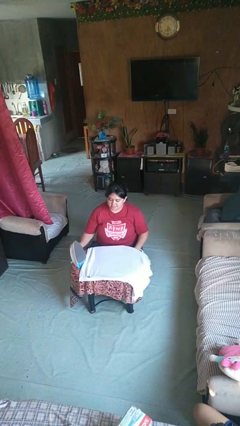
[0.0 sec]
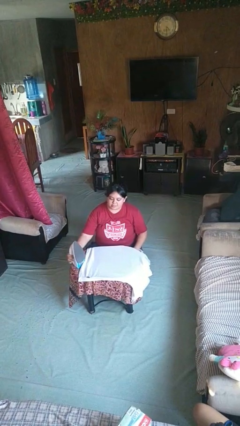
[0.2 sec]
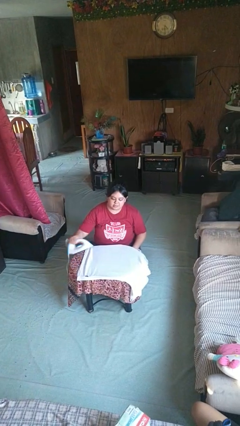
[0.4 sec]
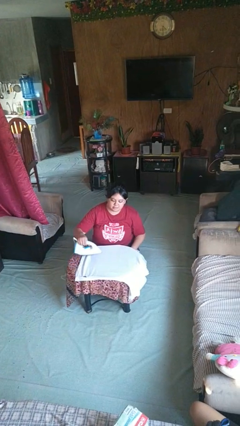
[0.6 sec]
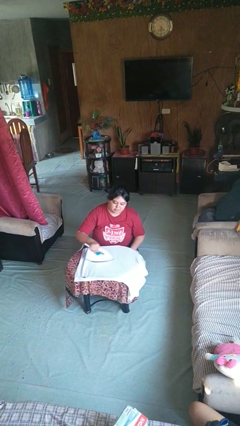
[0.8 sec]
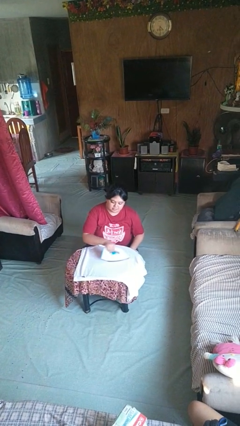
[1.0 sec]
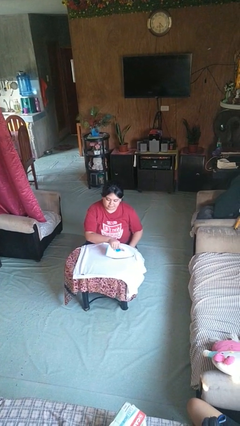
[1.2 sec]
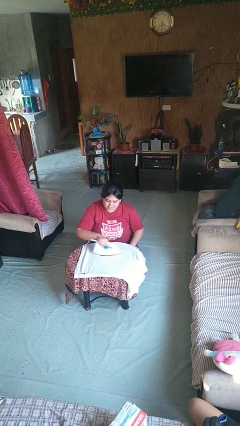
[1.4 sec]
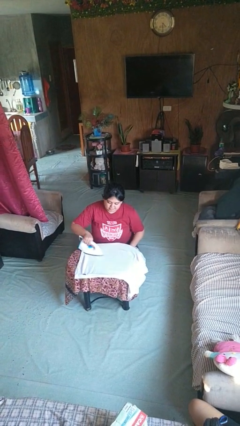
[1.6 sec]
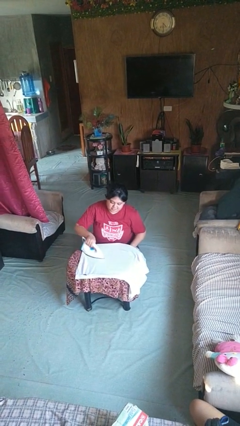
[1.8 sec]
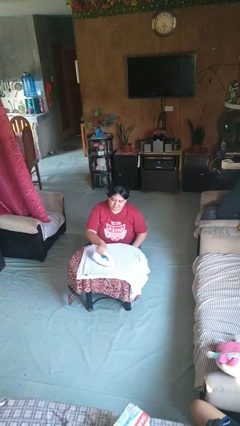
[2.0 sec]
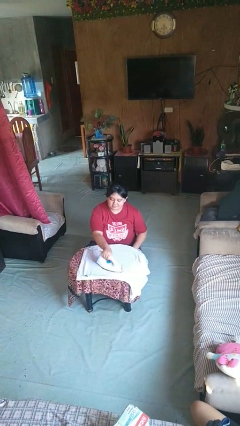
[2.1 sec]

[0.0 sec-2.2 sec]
person irons clothes

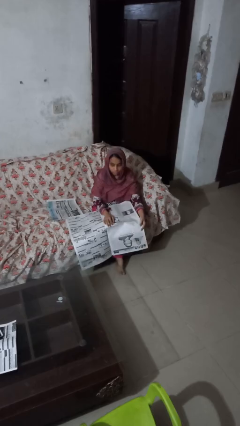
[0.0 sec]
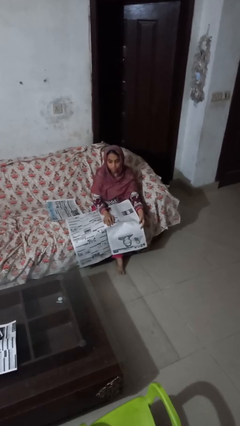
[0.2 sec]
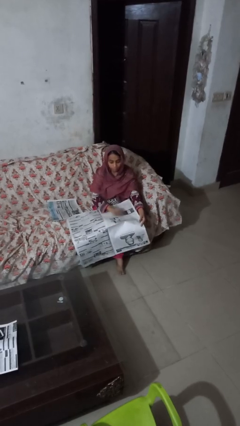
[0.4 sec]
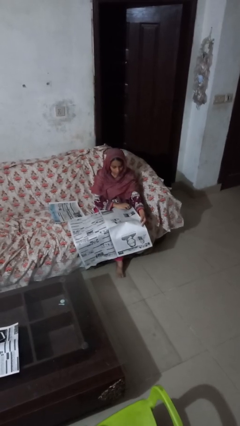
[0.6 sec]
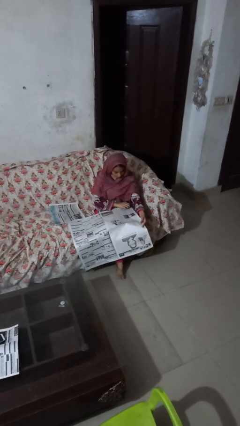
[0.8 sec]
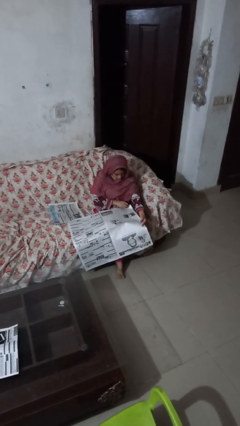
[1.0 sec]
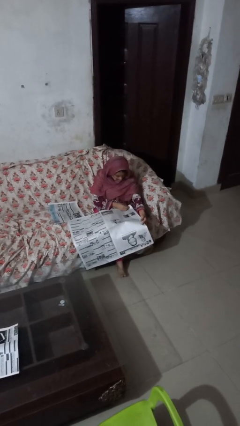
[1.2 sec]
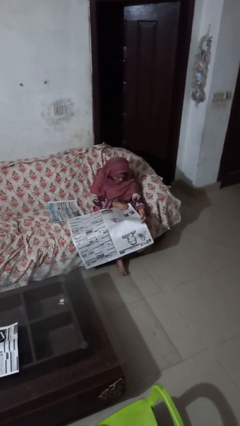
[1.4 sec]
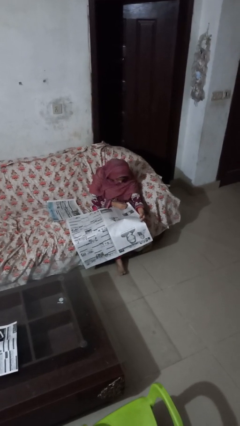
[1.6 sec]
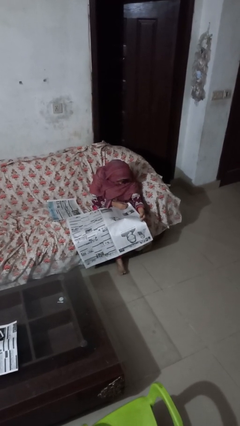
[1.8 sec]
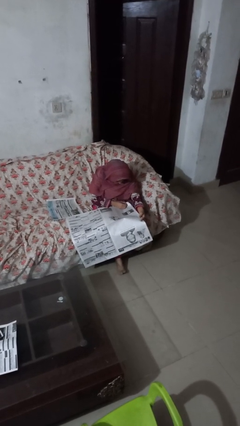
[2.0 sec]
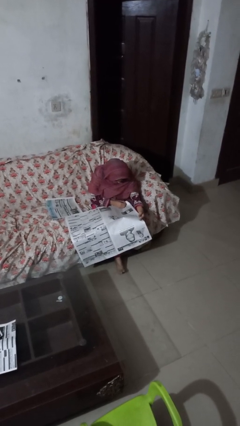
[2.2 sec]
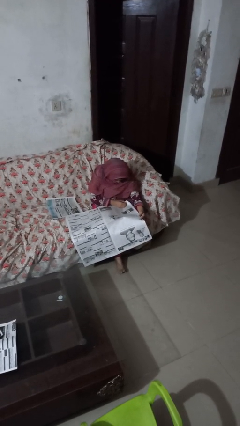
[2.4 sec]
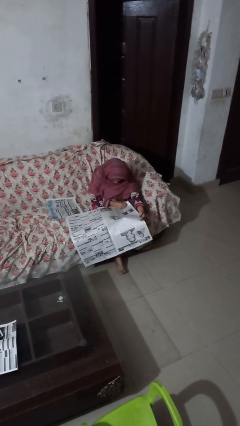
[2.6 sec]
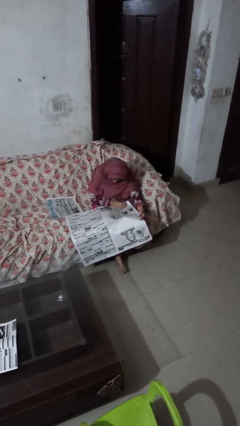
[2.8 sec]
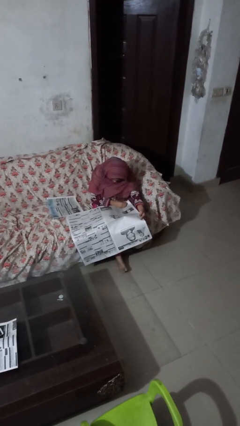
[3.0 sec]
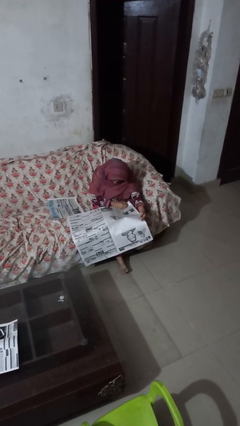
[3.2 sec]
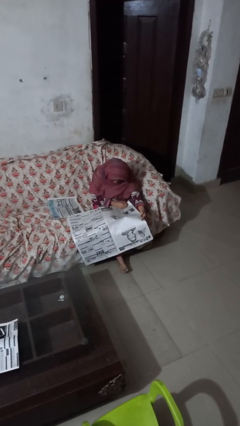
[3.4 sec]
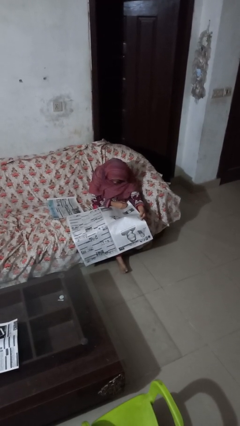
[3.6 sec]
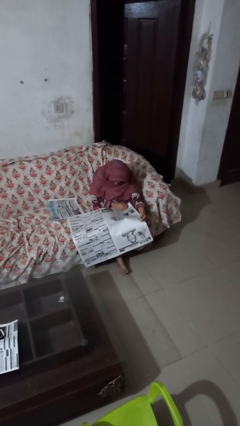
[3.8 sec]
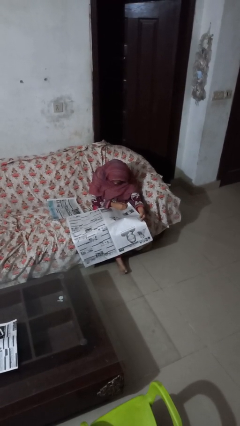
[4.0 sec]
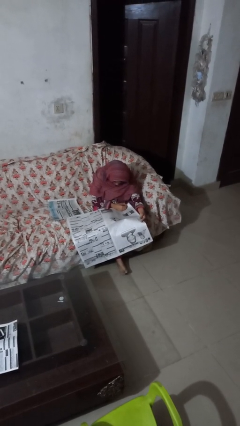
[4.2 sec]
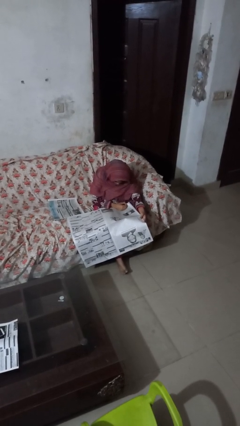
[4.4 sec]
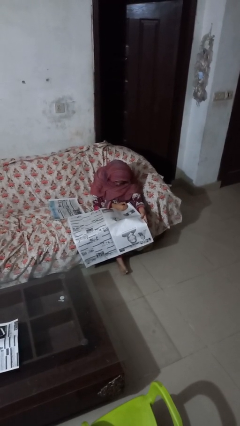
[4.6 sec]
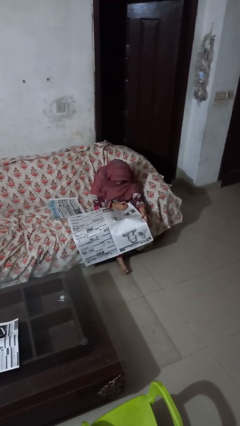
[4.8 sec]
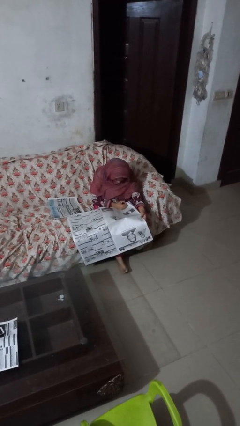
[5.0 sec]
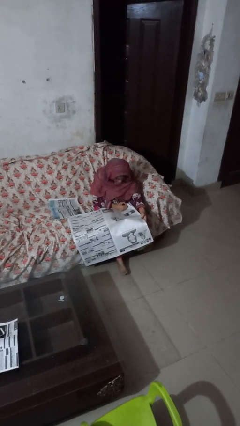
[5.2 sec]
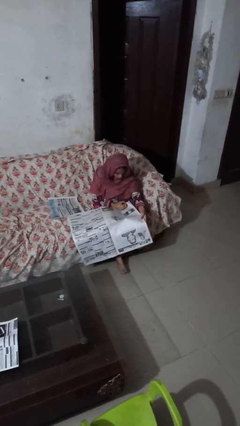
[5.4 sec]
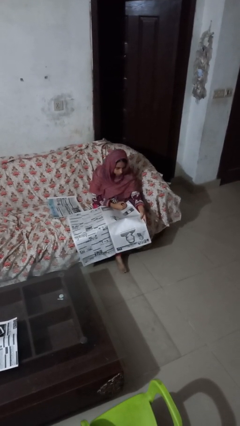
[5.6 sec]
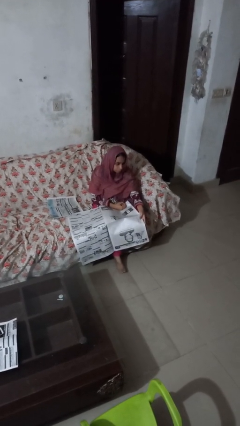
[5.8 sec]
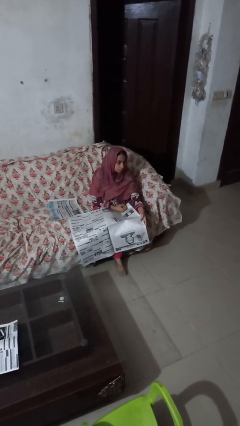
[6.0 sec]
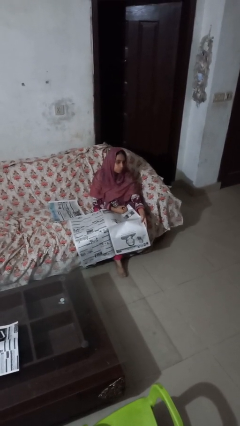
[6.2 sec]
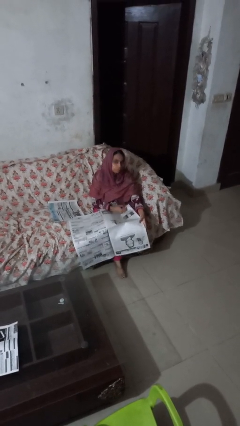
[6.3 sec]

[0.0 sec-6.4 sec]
person reads newspaper

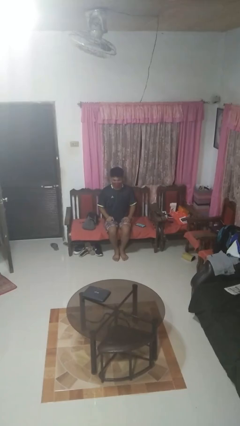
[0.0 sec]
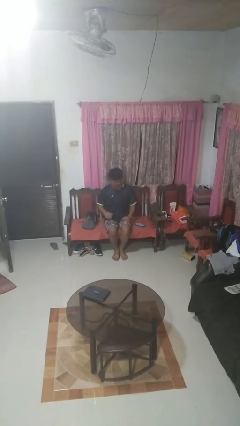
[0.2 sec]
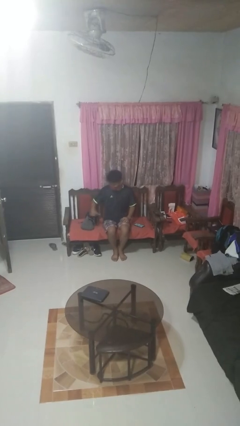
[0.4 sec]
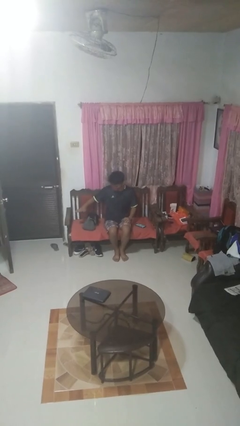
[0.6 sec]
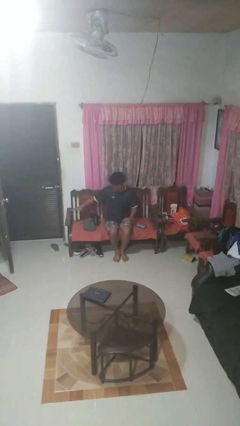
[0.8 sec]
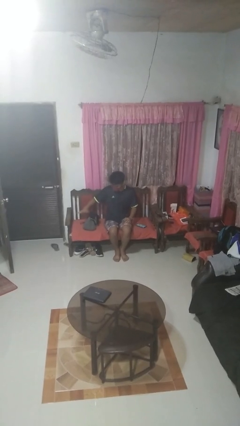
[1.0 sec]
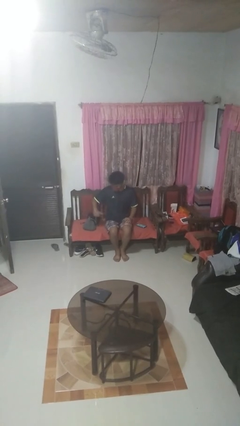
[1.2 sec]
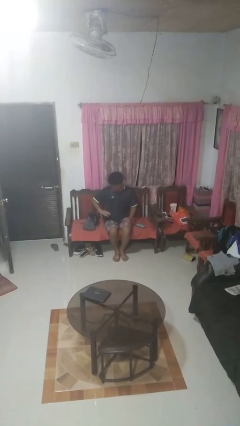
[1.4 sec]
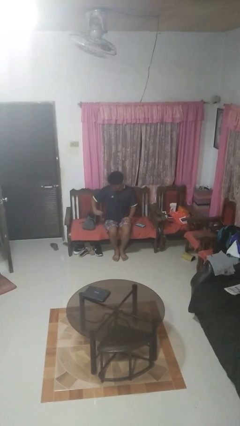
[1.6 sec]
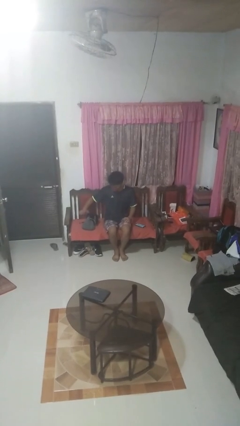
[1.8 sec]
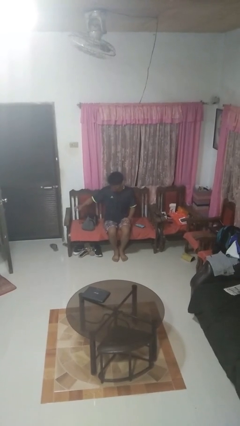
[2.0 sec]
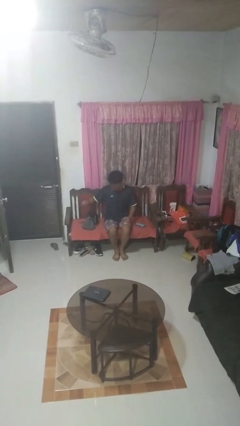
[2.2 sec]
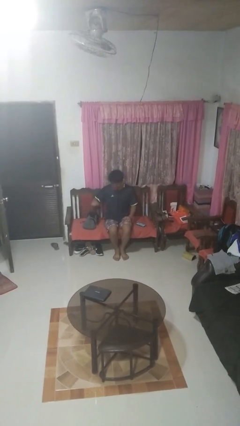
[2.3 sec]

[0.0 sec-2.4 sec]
person waves hand over object

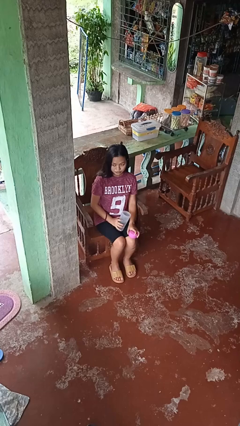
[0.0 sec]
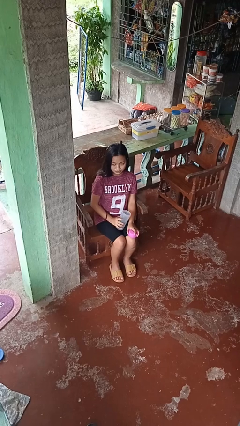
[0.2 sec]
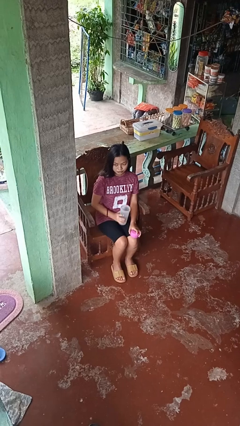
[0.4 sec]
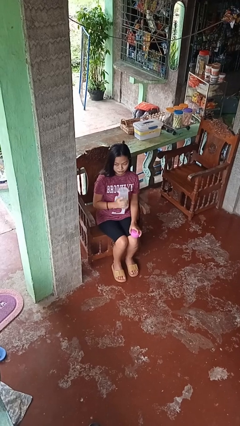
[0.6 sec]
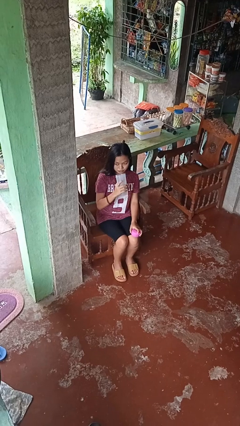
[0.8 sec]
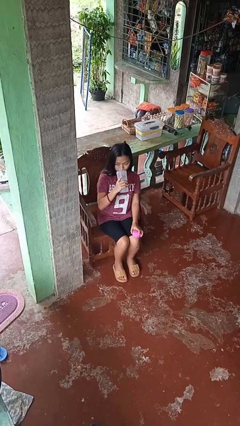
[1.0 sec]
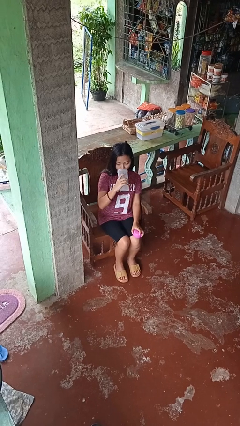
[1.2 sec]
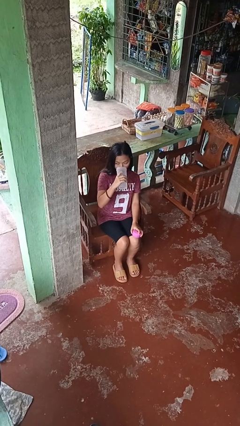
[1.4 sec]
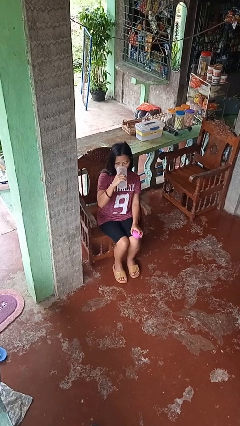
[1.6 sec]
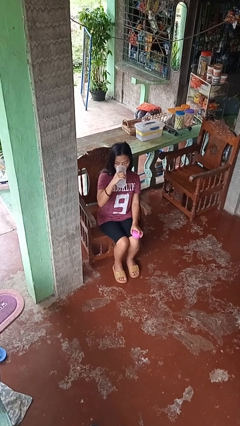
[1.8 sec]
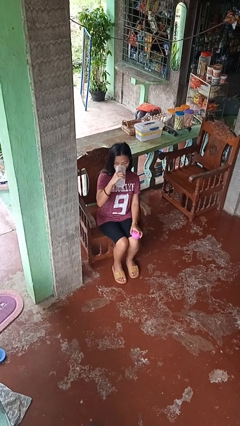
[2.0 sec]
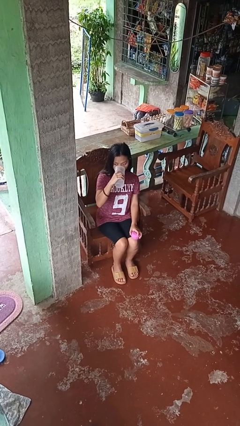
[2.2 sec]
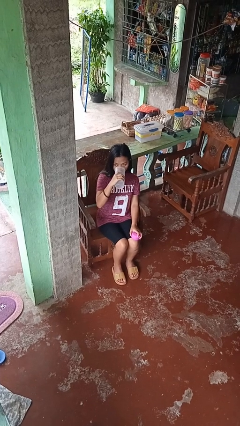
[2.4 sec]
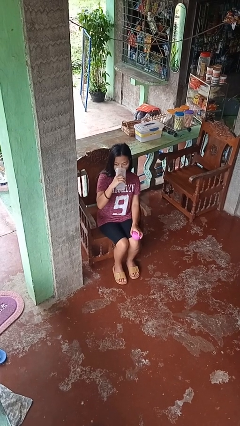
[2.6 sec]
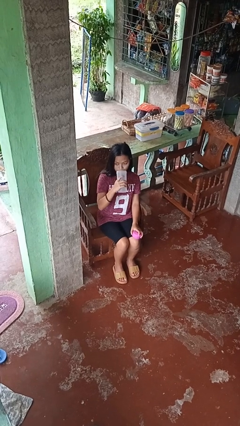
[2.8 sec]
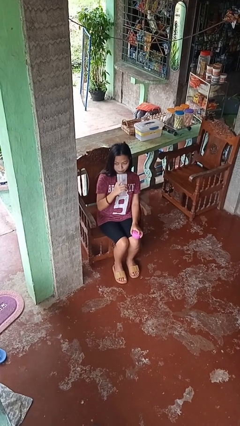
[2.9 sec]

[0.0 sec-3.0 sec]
person drinks from bottle

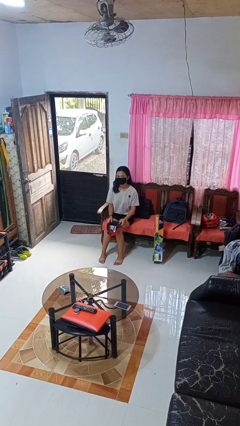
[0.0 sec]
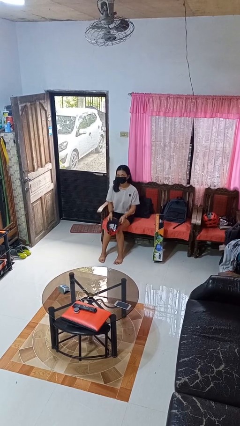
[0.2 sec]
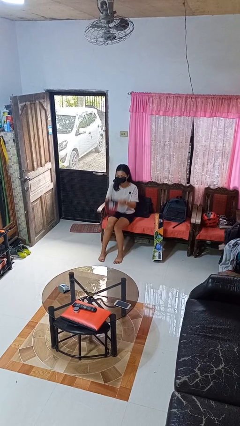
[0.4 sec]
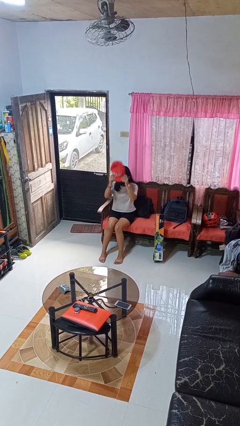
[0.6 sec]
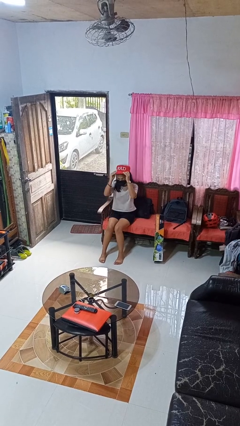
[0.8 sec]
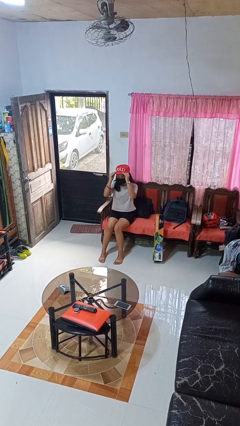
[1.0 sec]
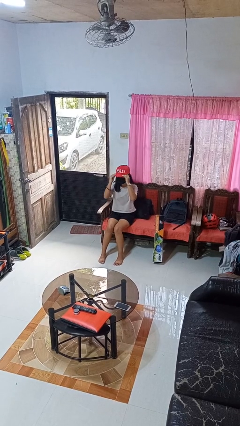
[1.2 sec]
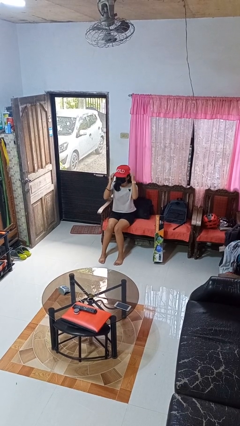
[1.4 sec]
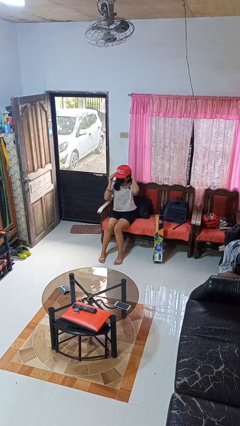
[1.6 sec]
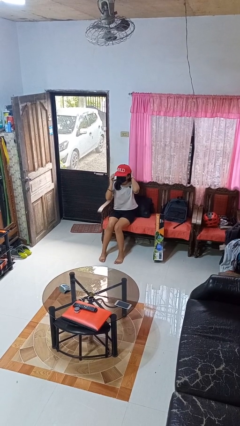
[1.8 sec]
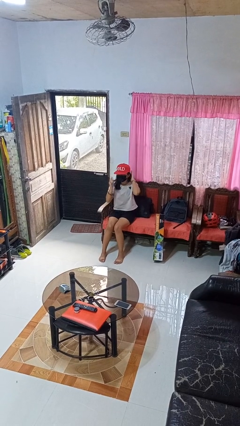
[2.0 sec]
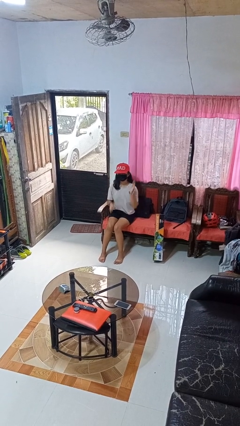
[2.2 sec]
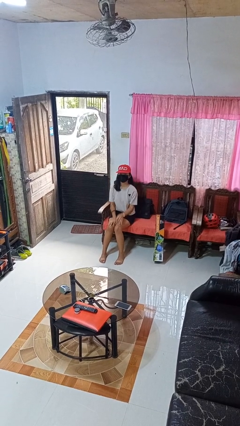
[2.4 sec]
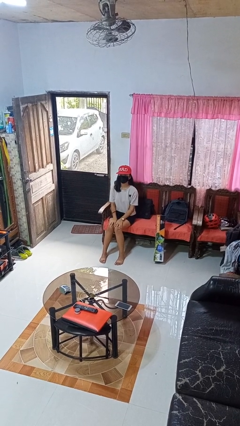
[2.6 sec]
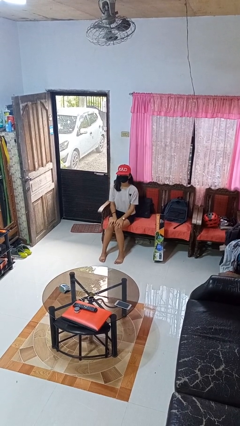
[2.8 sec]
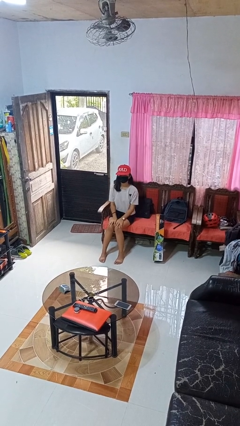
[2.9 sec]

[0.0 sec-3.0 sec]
person puts on hat

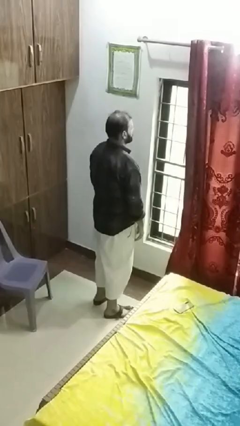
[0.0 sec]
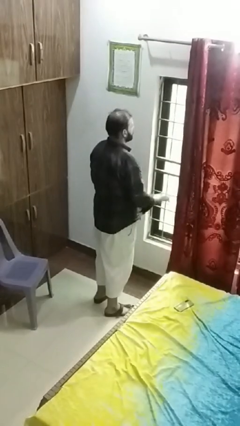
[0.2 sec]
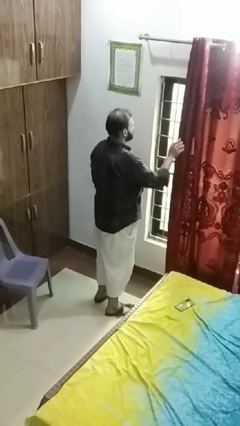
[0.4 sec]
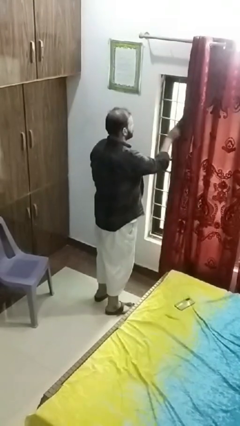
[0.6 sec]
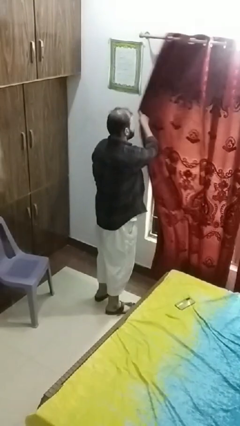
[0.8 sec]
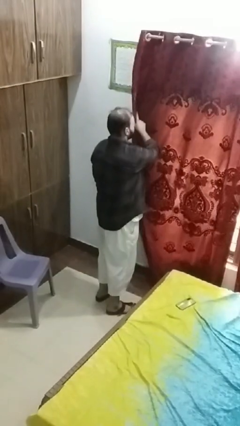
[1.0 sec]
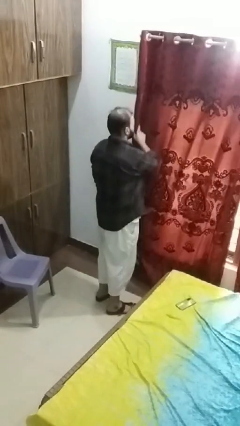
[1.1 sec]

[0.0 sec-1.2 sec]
person closes curtains
